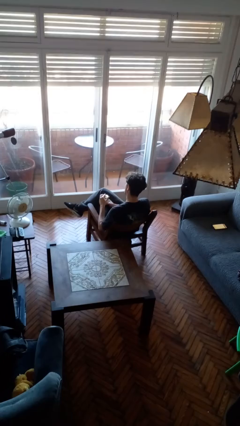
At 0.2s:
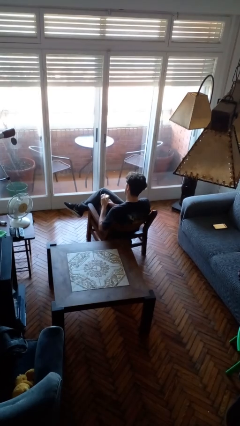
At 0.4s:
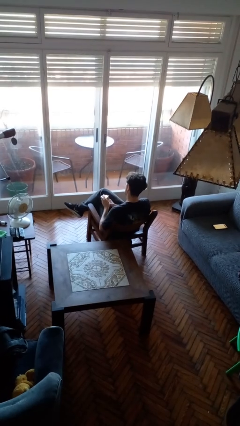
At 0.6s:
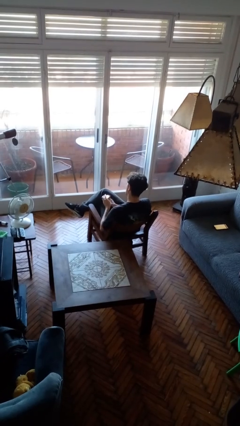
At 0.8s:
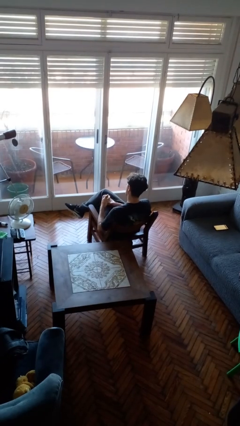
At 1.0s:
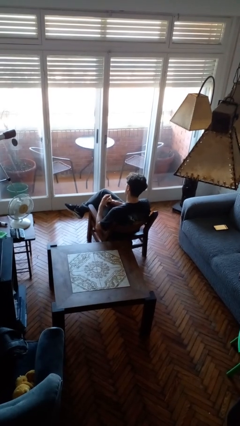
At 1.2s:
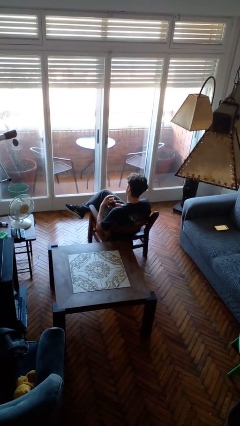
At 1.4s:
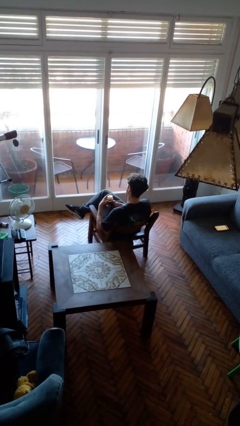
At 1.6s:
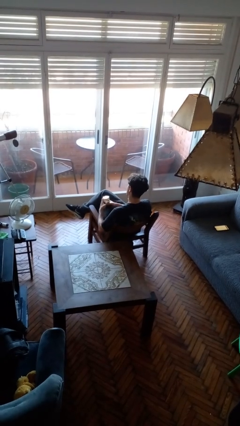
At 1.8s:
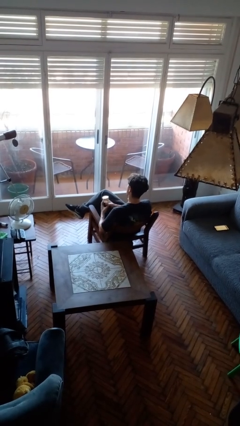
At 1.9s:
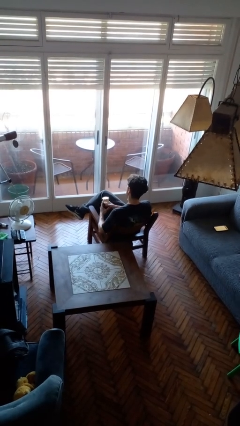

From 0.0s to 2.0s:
person closes jar

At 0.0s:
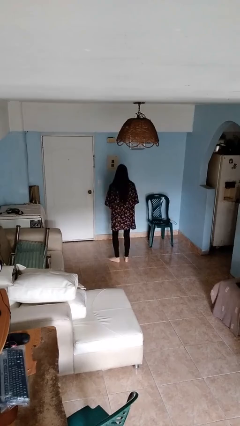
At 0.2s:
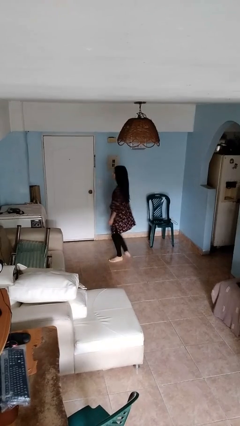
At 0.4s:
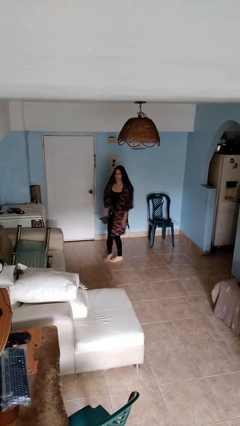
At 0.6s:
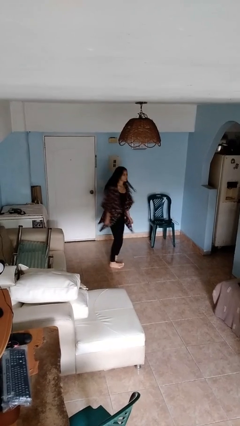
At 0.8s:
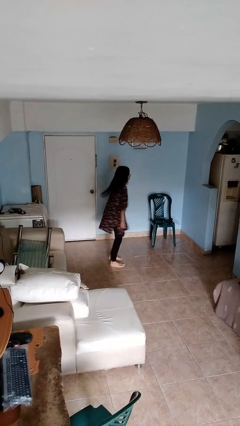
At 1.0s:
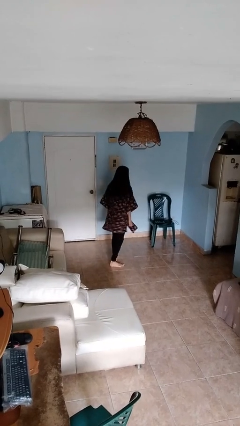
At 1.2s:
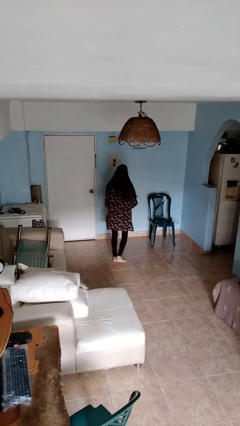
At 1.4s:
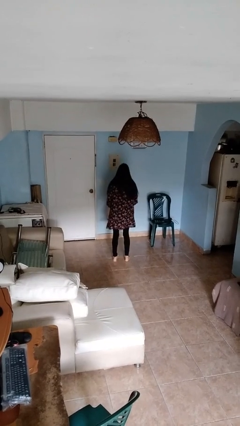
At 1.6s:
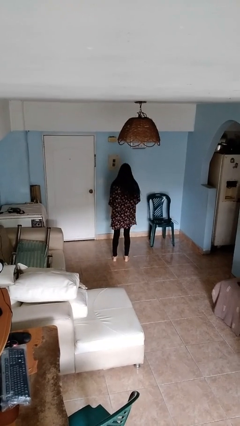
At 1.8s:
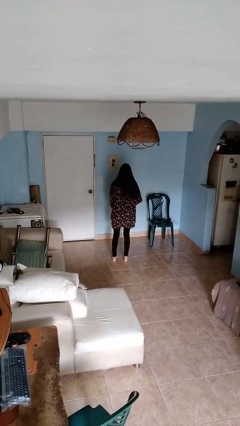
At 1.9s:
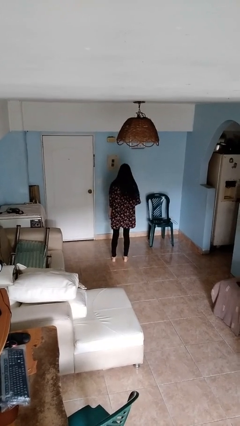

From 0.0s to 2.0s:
person twirls

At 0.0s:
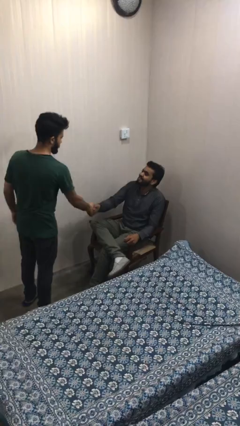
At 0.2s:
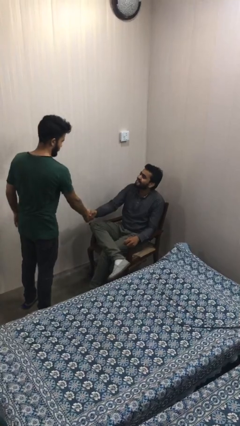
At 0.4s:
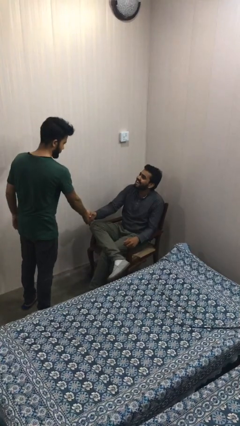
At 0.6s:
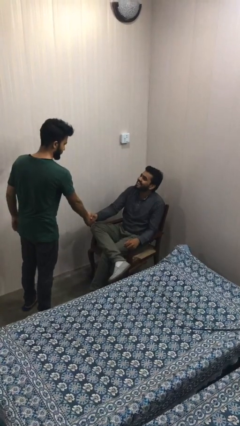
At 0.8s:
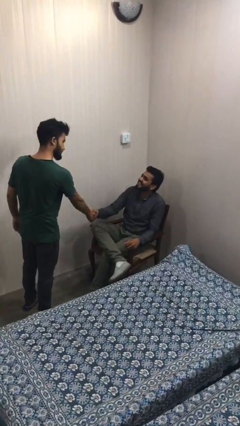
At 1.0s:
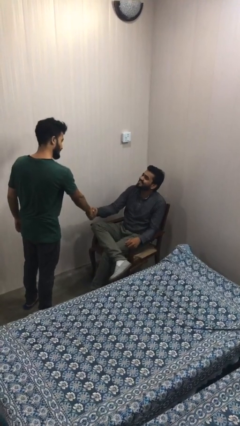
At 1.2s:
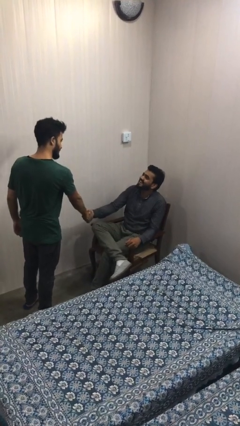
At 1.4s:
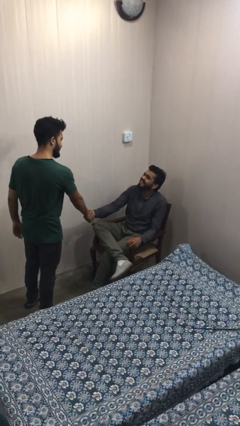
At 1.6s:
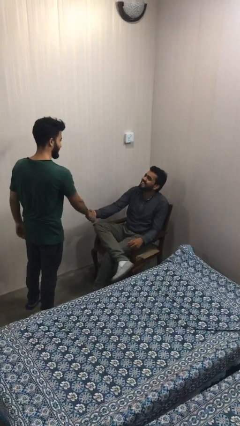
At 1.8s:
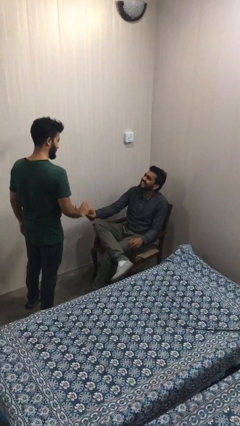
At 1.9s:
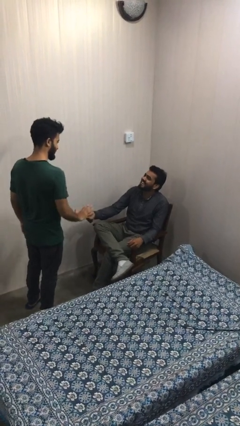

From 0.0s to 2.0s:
person shakes hand

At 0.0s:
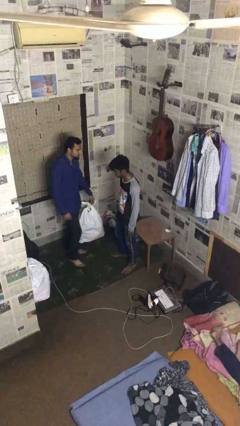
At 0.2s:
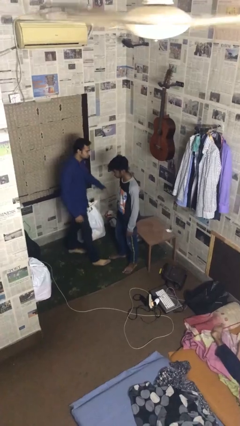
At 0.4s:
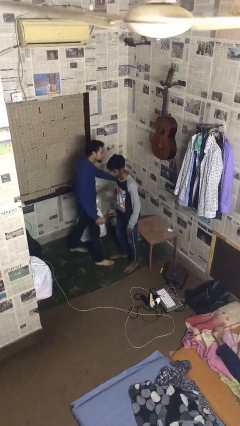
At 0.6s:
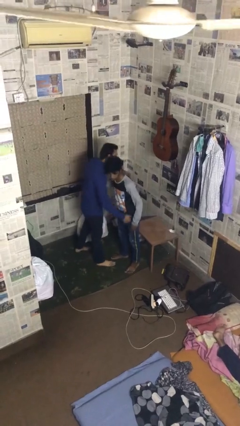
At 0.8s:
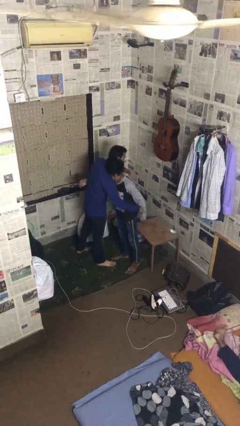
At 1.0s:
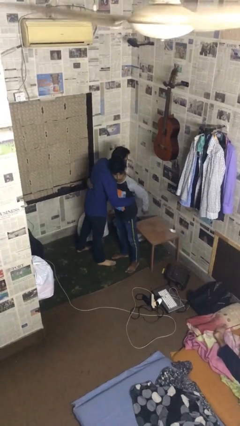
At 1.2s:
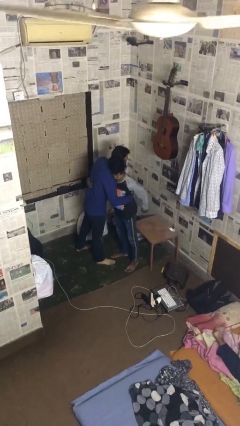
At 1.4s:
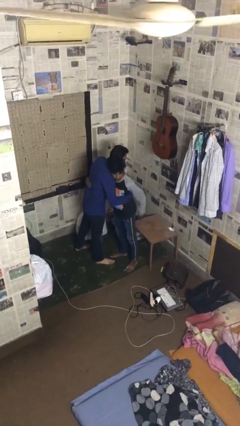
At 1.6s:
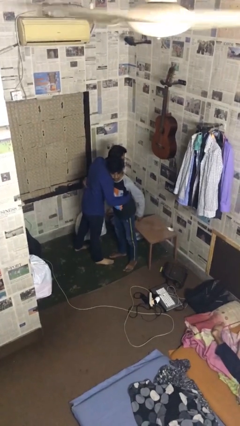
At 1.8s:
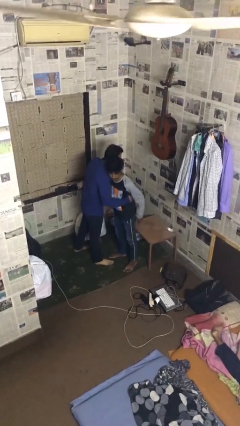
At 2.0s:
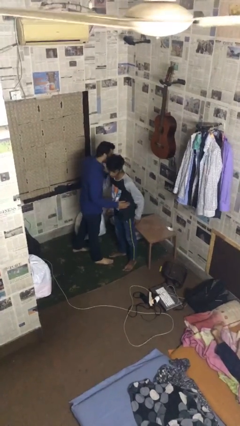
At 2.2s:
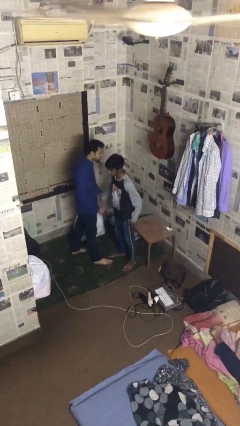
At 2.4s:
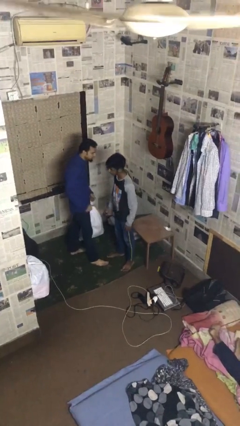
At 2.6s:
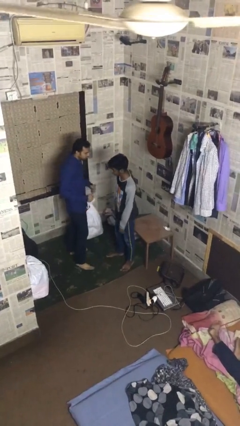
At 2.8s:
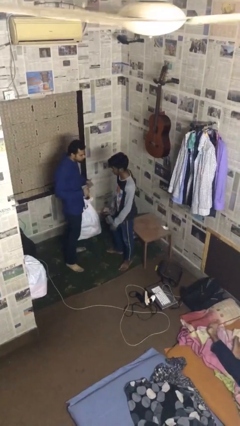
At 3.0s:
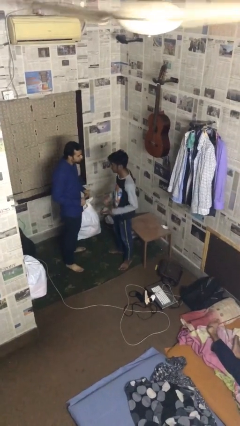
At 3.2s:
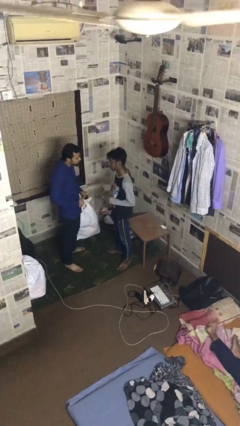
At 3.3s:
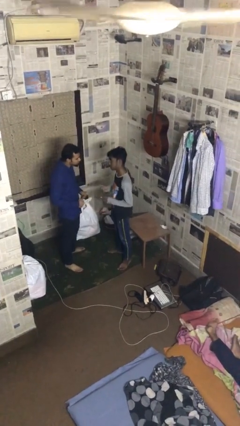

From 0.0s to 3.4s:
person embraces person

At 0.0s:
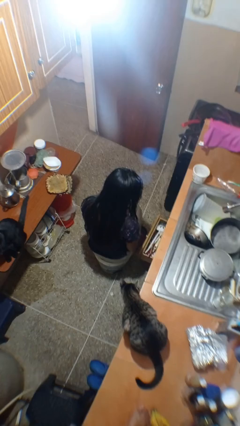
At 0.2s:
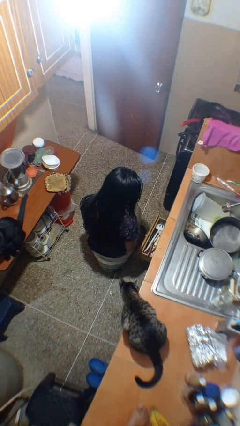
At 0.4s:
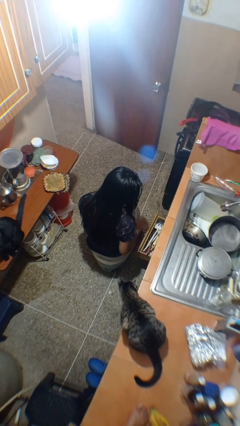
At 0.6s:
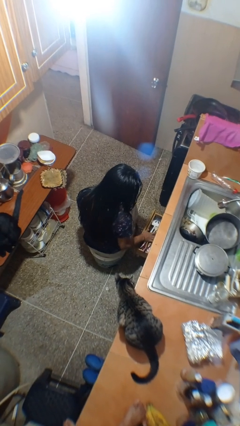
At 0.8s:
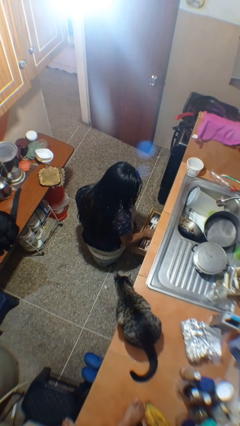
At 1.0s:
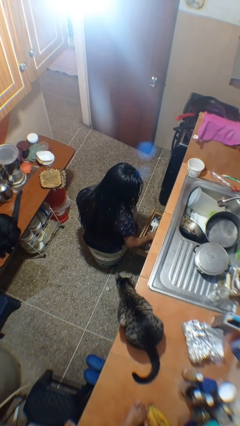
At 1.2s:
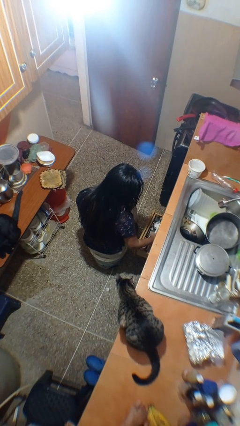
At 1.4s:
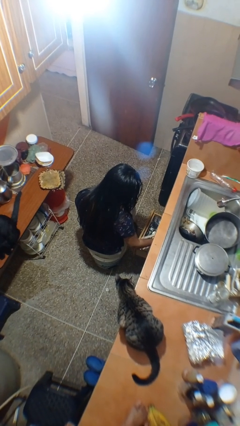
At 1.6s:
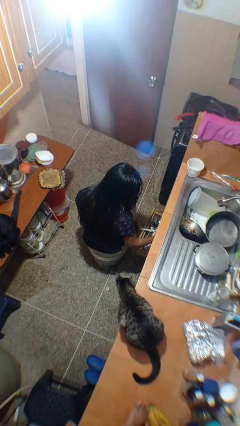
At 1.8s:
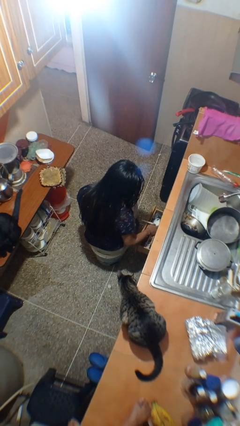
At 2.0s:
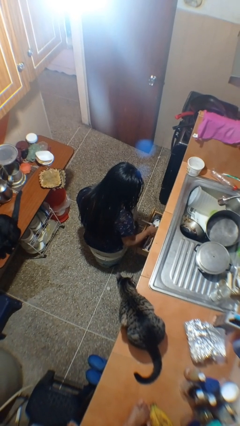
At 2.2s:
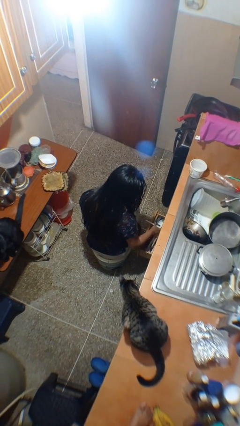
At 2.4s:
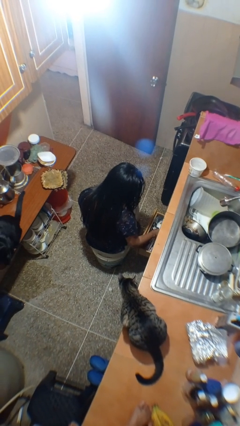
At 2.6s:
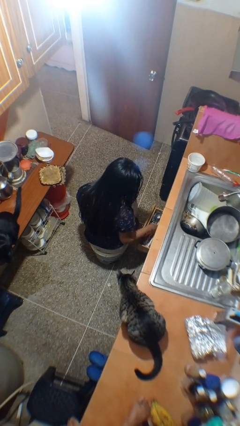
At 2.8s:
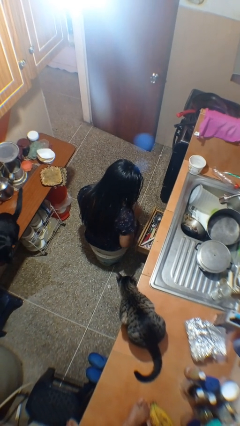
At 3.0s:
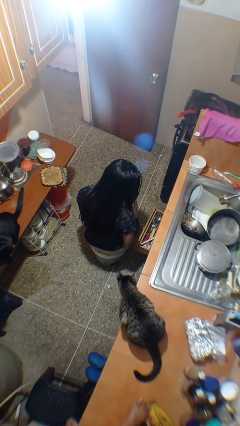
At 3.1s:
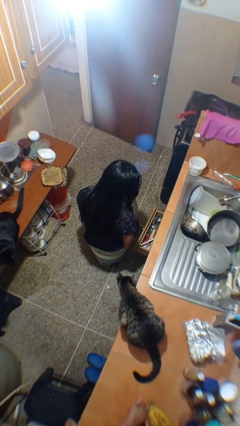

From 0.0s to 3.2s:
person searches in kitchen drawer

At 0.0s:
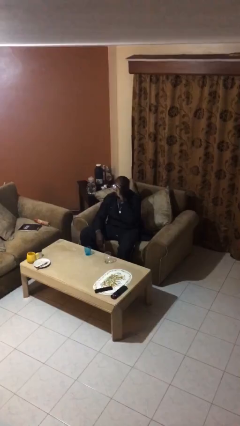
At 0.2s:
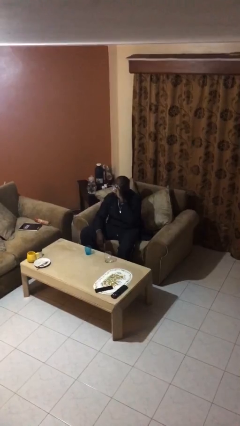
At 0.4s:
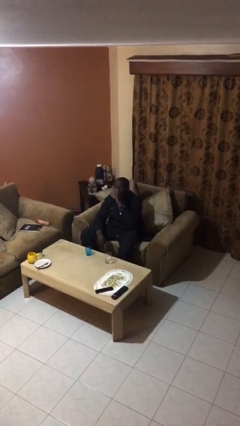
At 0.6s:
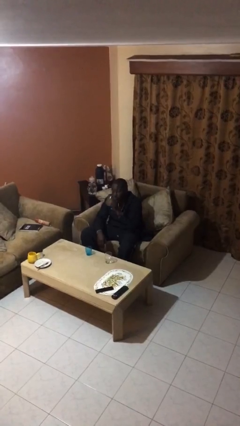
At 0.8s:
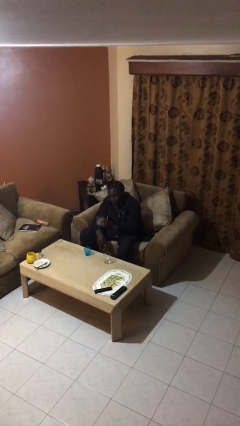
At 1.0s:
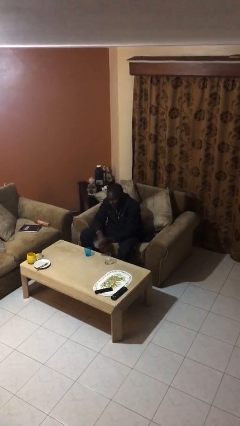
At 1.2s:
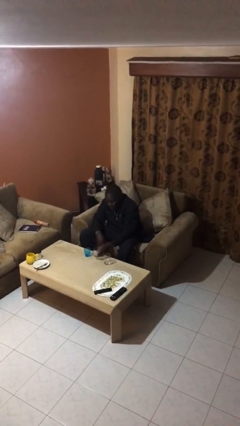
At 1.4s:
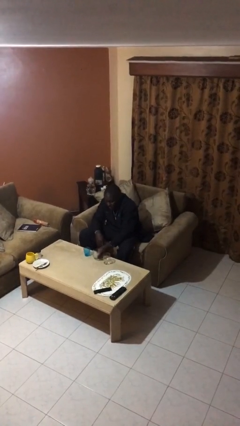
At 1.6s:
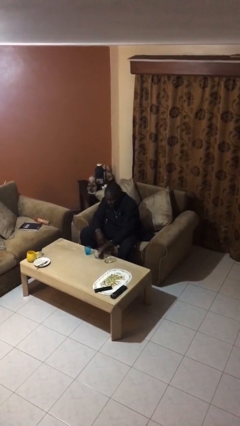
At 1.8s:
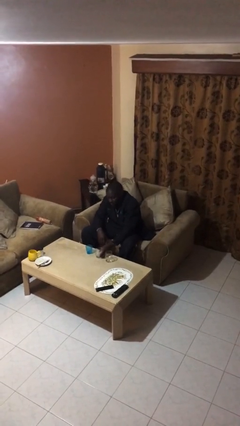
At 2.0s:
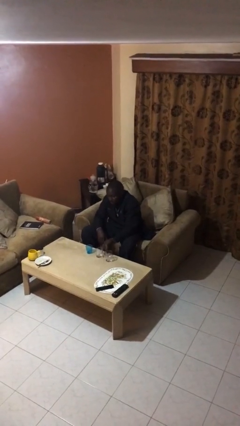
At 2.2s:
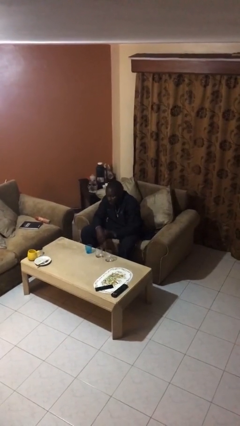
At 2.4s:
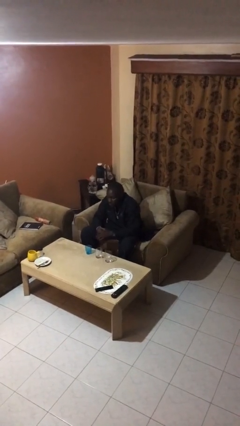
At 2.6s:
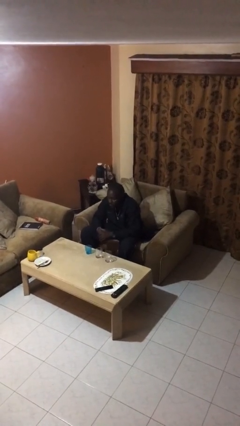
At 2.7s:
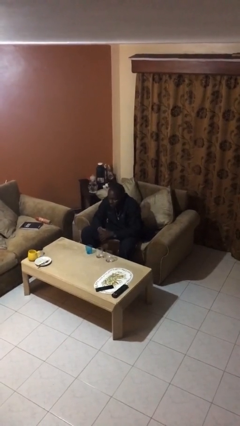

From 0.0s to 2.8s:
person puts down object on table

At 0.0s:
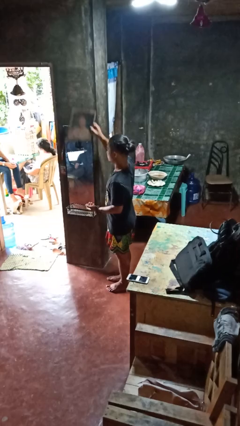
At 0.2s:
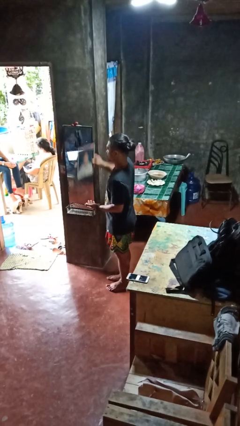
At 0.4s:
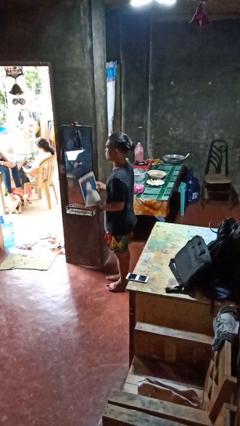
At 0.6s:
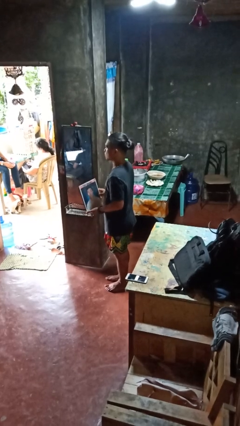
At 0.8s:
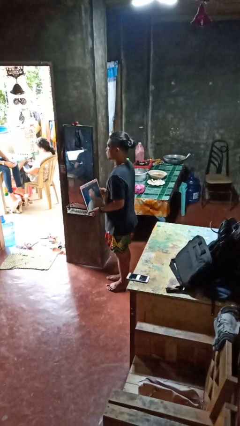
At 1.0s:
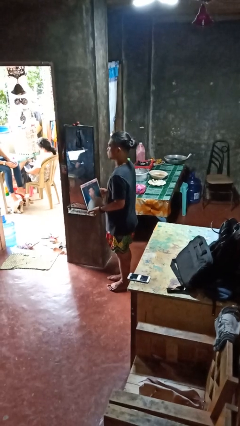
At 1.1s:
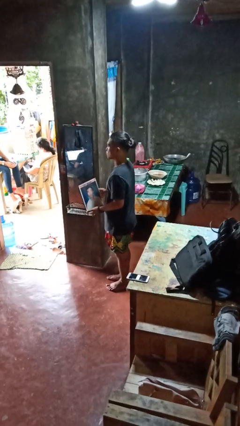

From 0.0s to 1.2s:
person takes down picture frame
